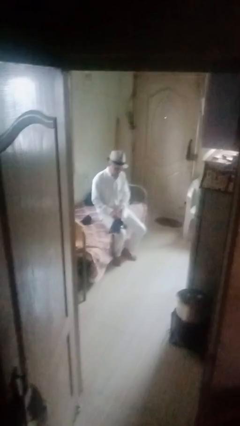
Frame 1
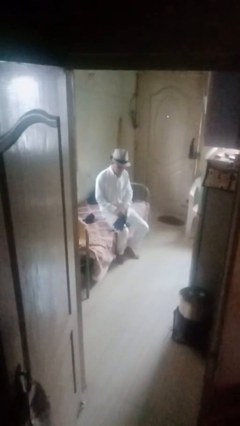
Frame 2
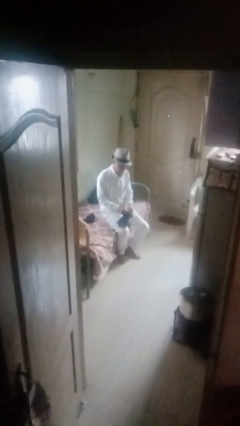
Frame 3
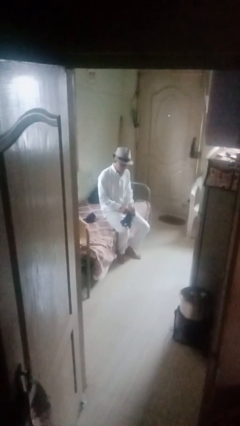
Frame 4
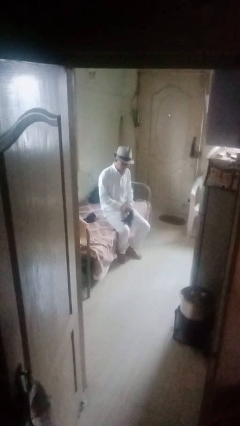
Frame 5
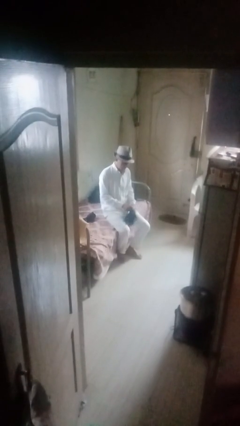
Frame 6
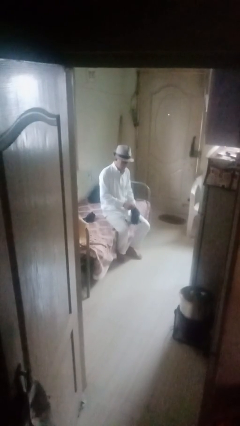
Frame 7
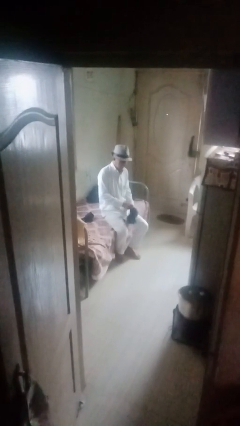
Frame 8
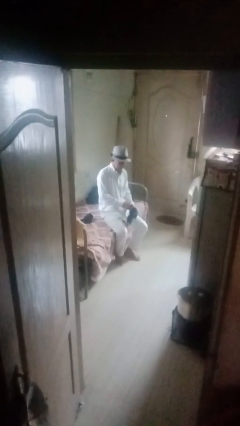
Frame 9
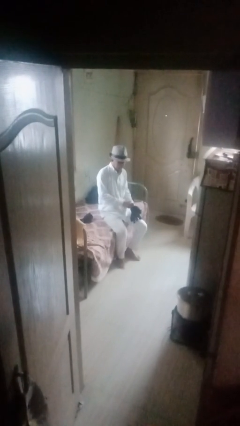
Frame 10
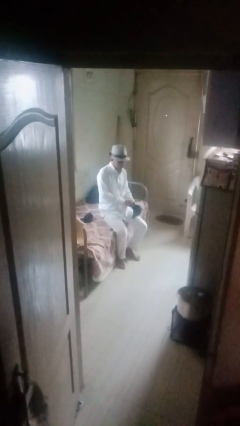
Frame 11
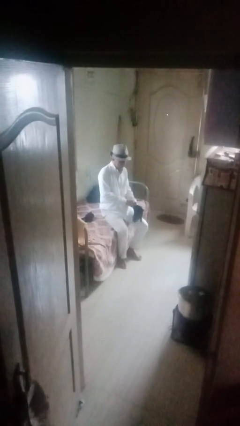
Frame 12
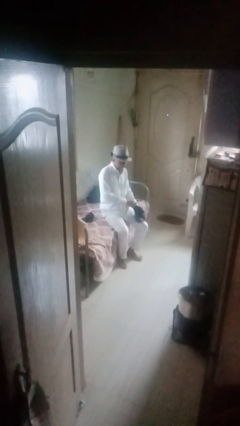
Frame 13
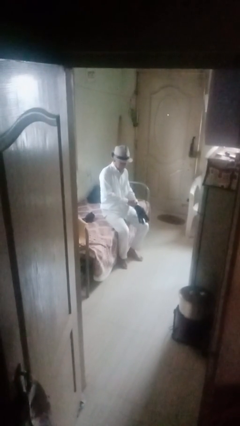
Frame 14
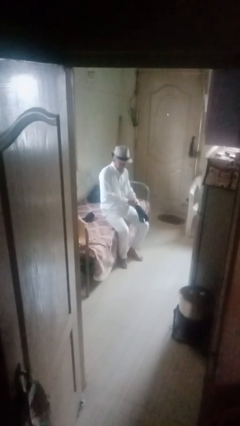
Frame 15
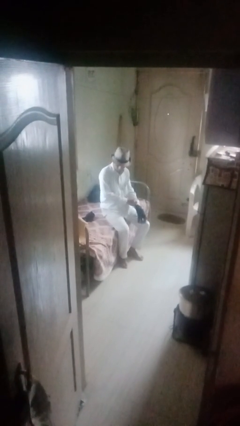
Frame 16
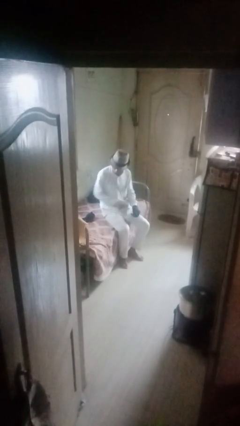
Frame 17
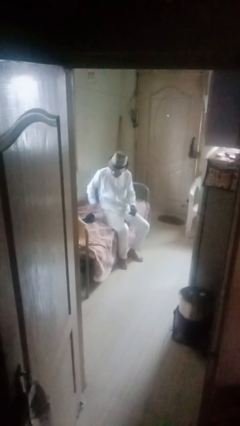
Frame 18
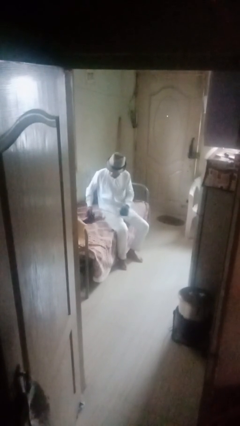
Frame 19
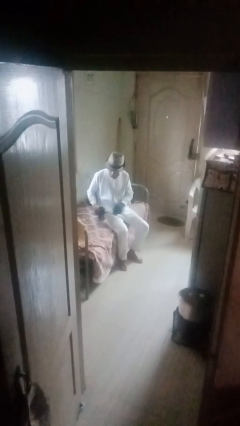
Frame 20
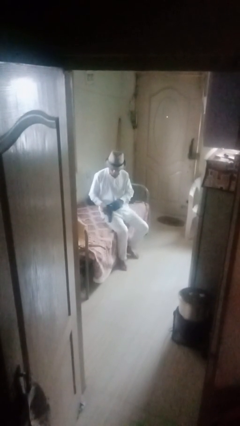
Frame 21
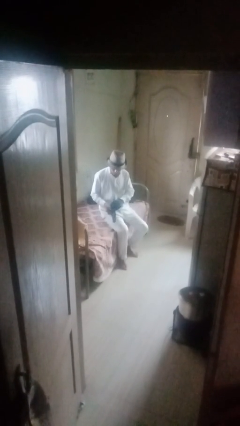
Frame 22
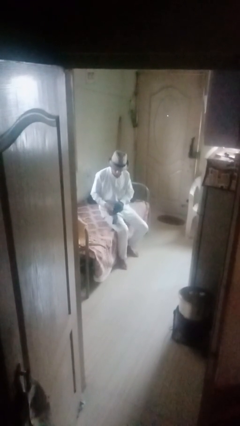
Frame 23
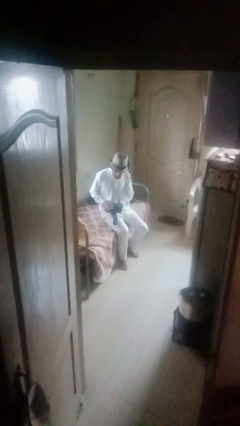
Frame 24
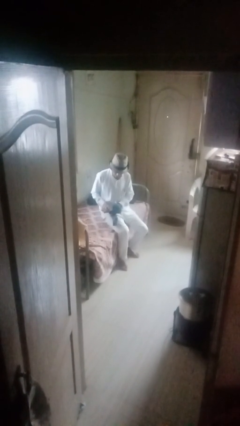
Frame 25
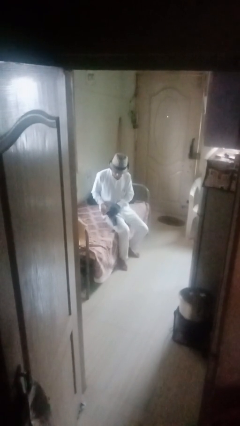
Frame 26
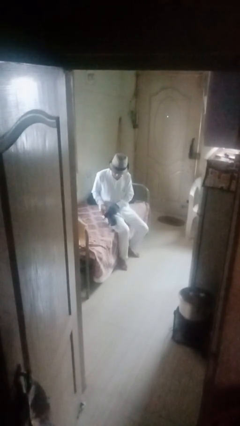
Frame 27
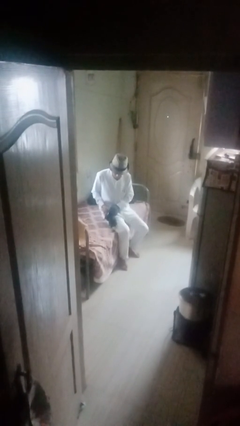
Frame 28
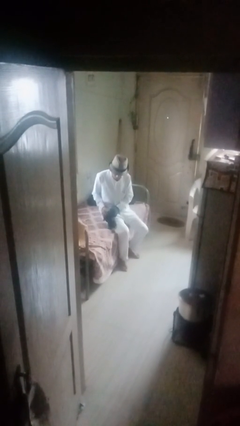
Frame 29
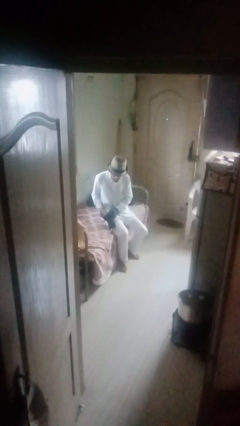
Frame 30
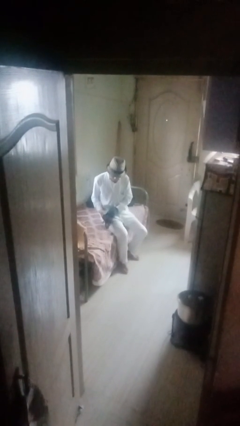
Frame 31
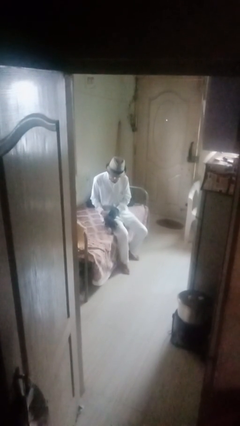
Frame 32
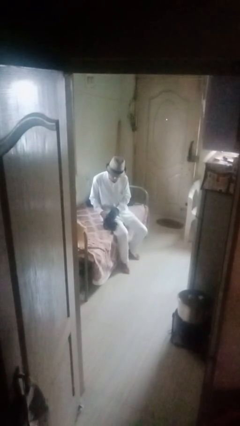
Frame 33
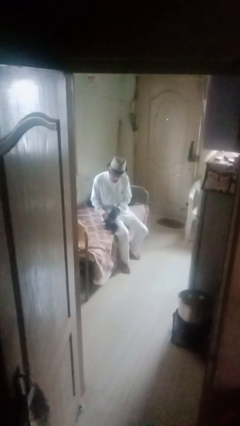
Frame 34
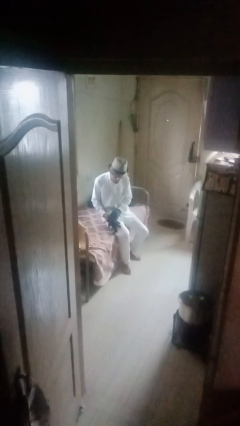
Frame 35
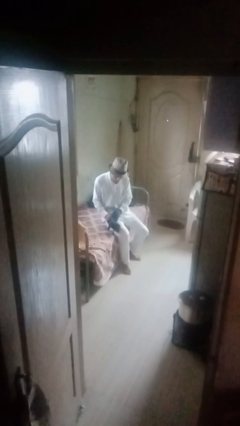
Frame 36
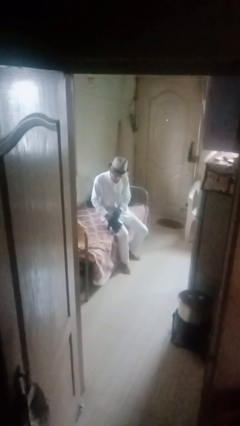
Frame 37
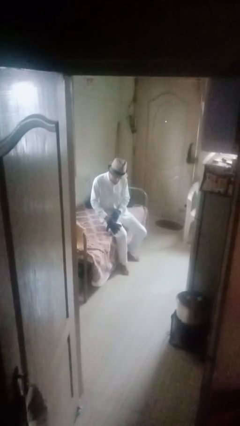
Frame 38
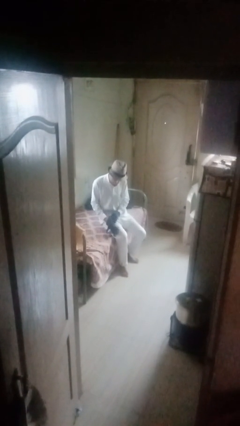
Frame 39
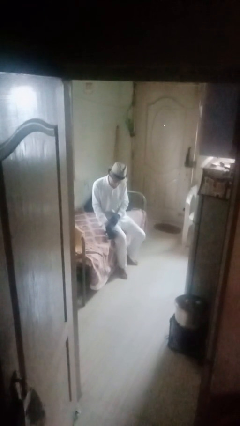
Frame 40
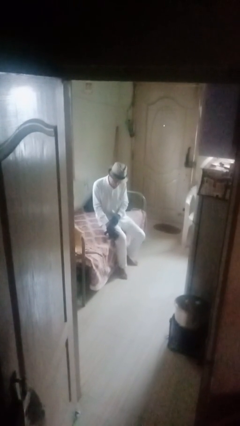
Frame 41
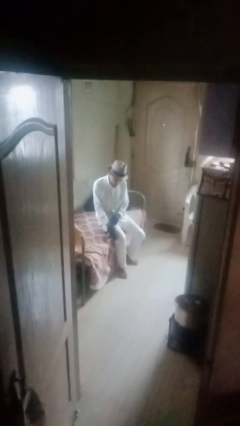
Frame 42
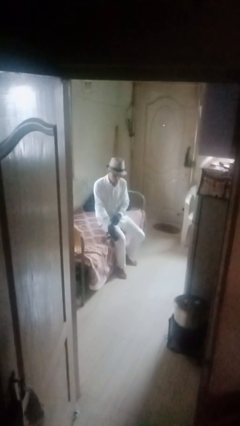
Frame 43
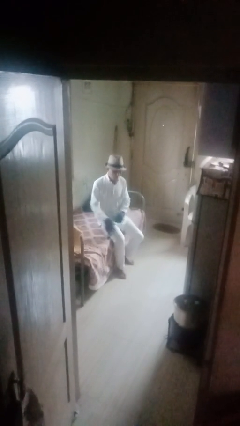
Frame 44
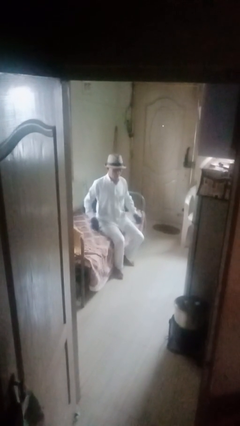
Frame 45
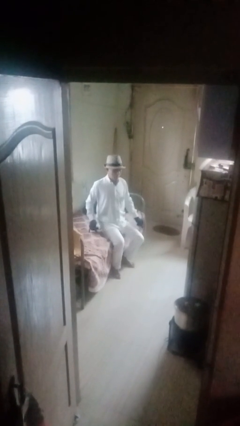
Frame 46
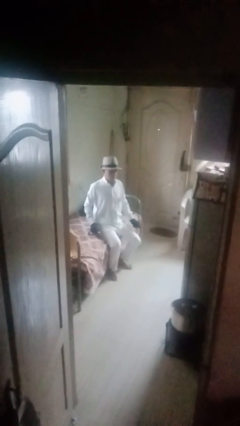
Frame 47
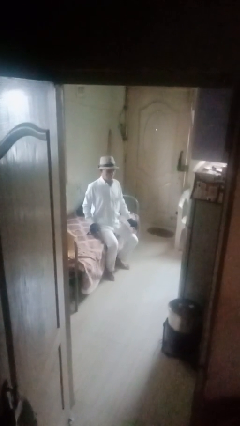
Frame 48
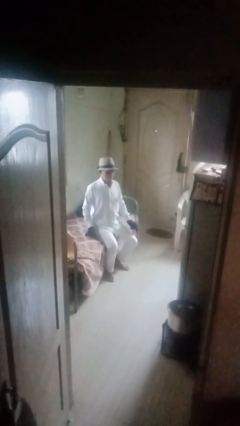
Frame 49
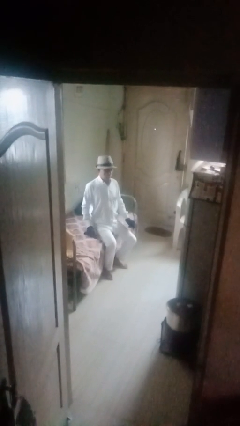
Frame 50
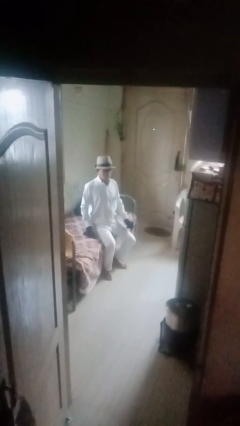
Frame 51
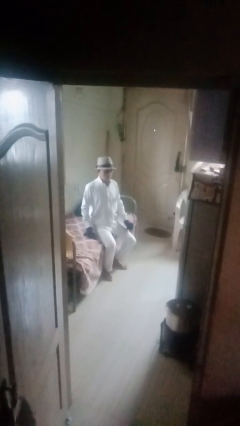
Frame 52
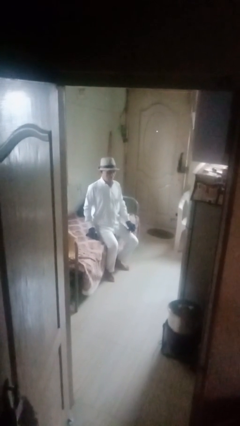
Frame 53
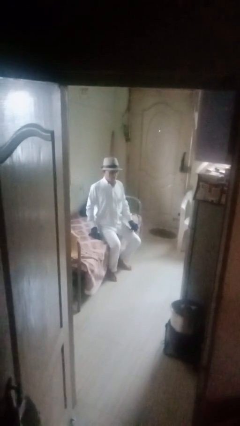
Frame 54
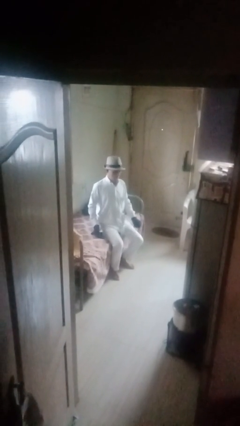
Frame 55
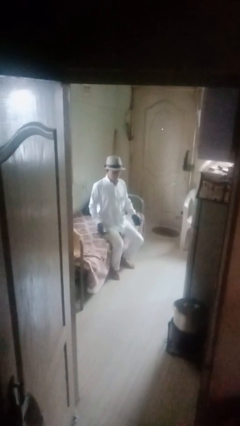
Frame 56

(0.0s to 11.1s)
person puts on gloves

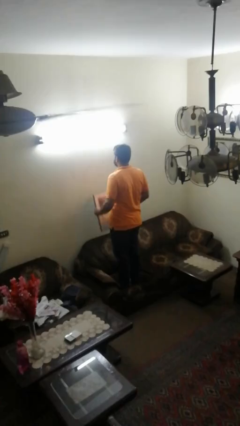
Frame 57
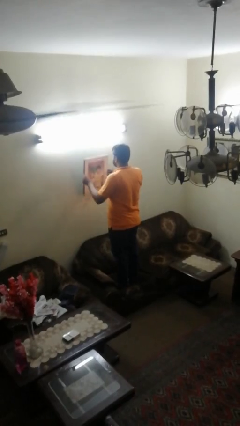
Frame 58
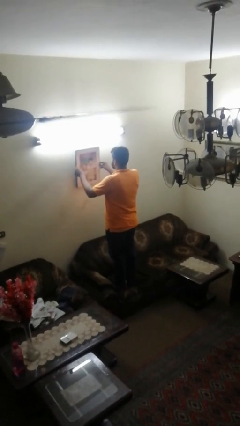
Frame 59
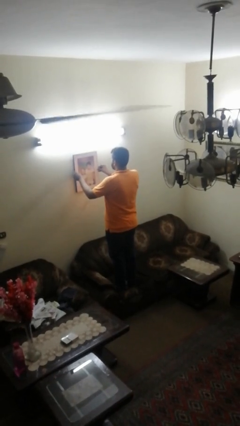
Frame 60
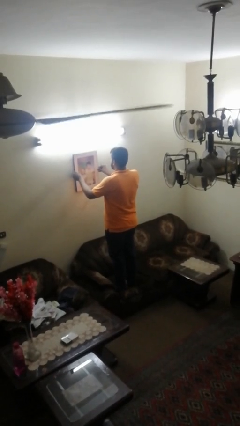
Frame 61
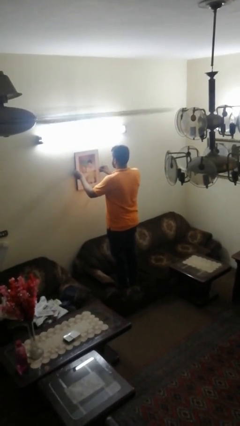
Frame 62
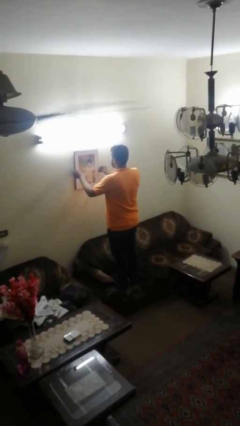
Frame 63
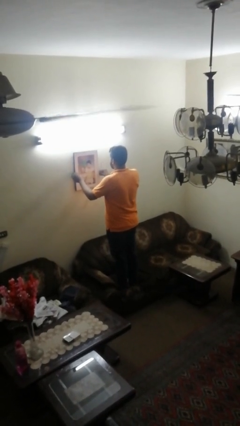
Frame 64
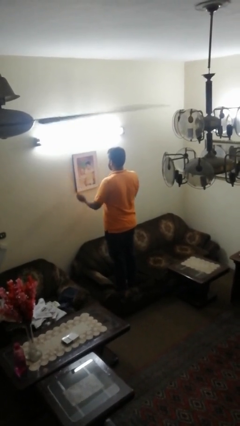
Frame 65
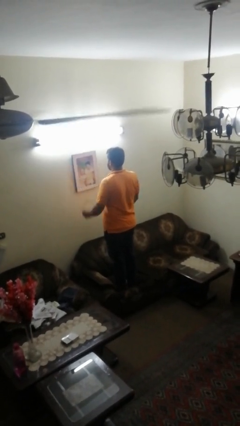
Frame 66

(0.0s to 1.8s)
person puts up picture frame

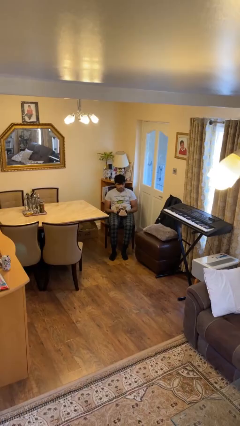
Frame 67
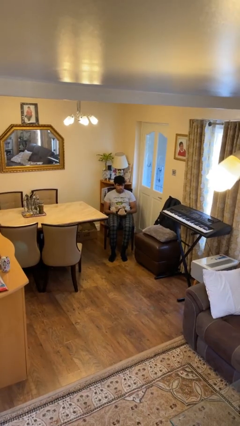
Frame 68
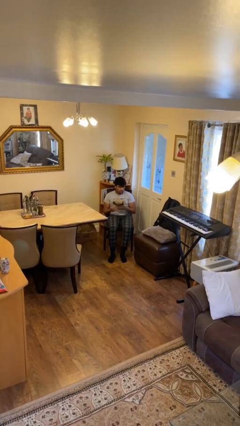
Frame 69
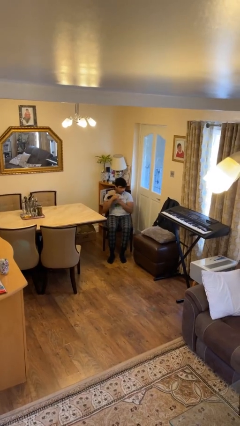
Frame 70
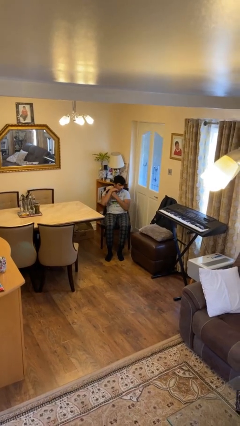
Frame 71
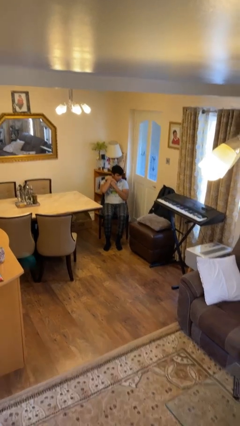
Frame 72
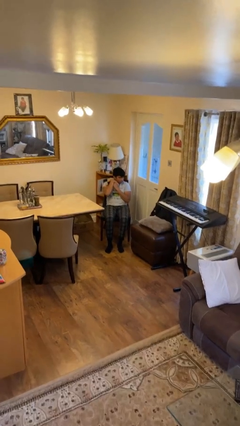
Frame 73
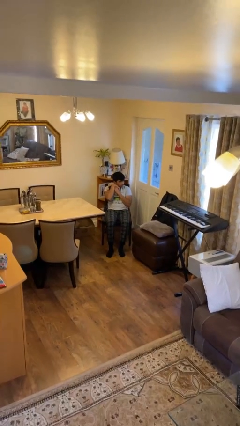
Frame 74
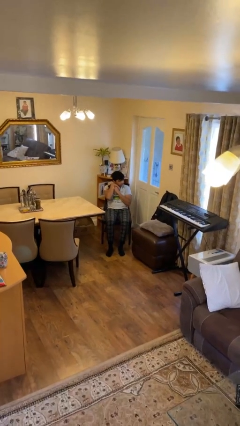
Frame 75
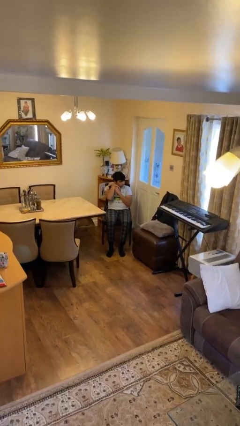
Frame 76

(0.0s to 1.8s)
person hugs stuffed animal

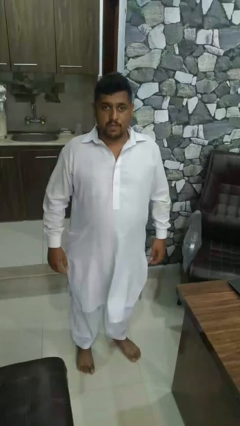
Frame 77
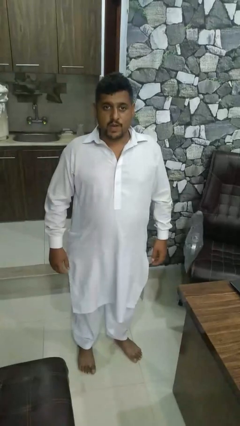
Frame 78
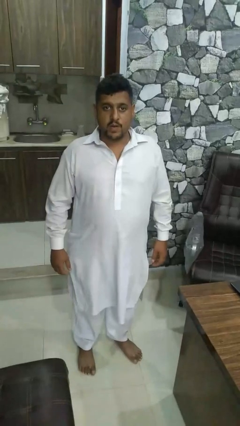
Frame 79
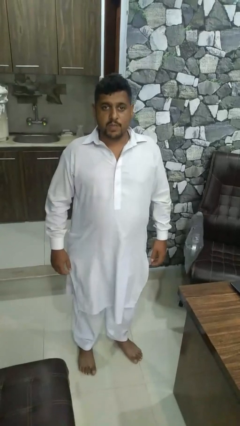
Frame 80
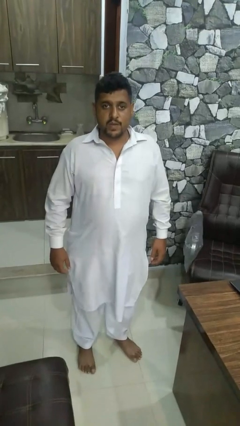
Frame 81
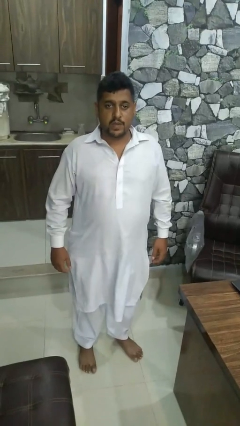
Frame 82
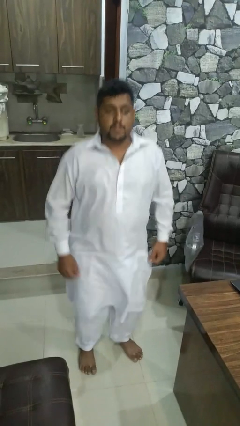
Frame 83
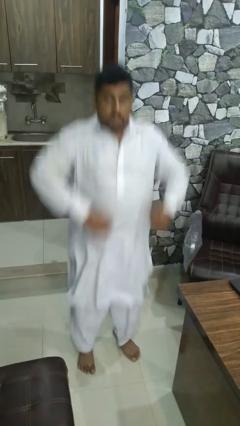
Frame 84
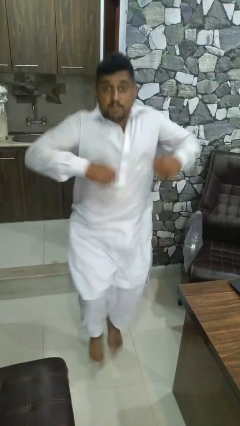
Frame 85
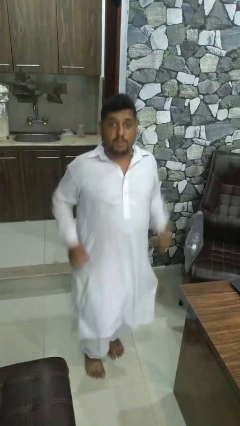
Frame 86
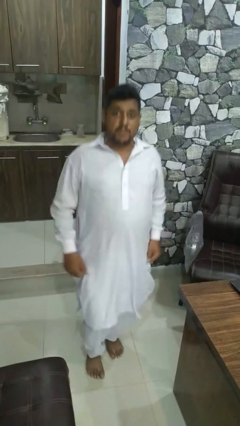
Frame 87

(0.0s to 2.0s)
person jumps

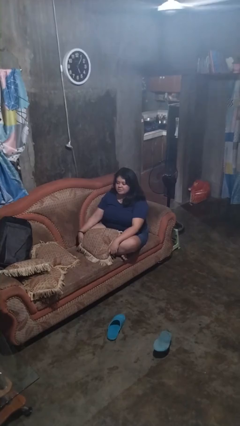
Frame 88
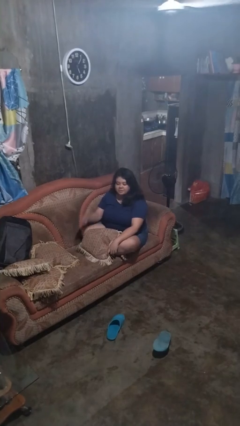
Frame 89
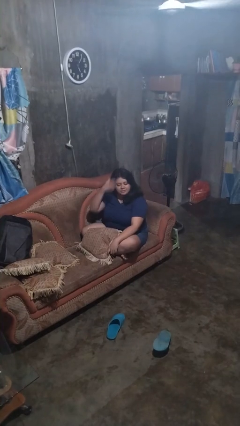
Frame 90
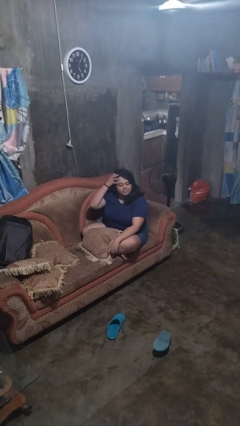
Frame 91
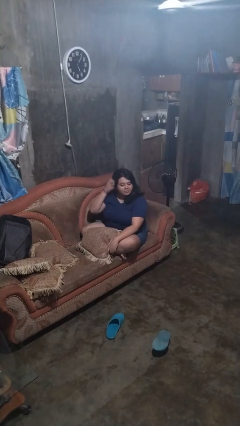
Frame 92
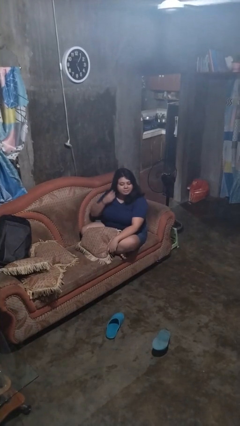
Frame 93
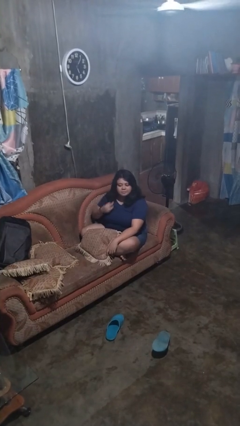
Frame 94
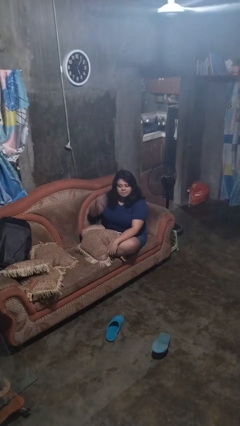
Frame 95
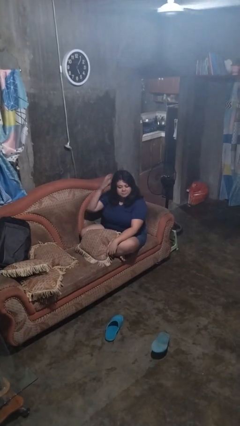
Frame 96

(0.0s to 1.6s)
person strokes hair
